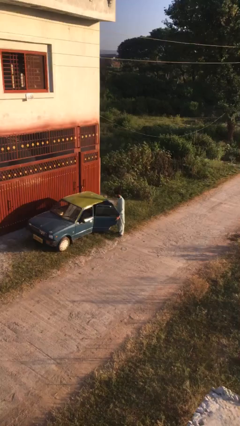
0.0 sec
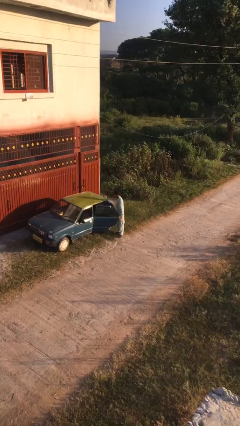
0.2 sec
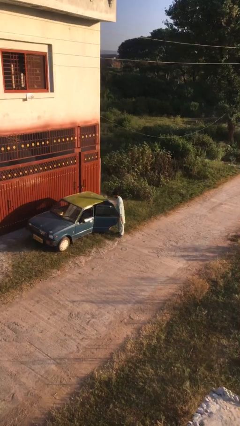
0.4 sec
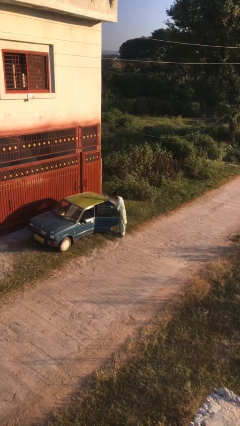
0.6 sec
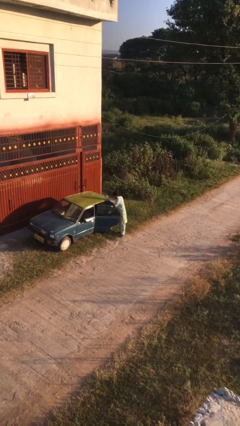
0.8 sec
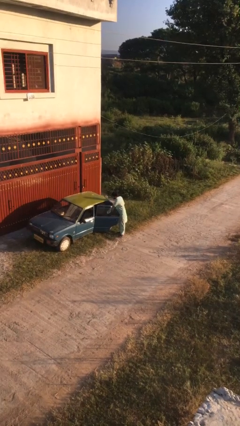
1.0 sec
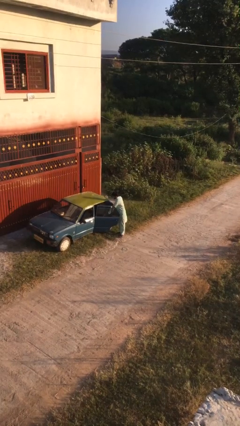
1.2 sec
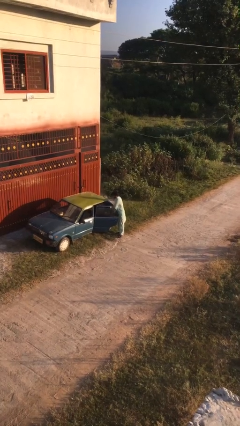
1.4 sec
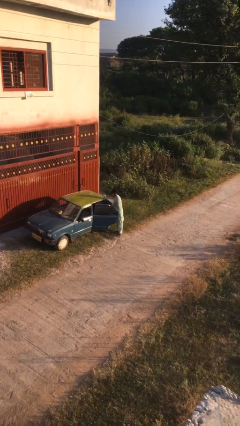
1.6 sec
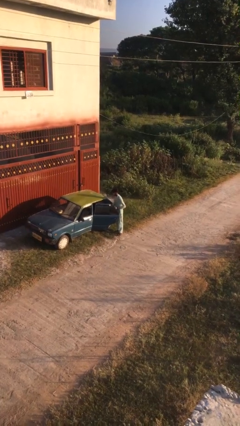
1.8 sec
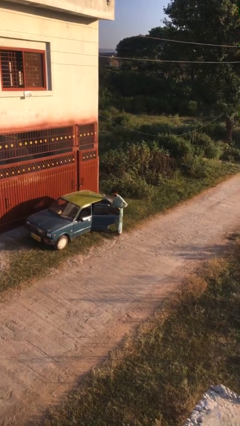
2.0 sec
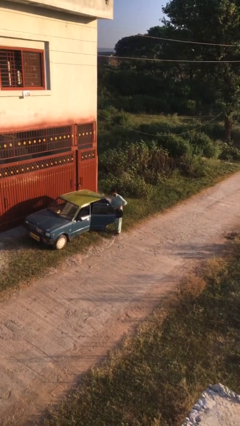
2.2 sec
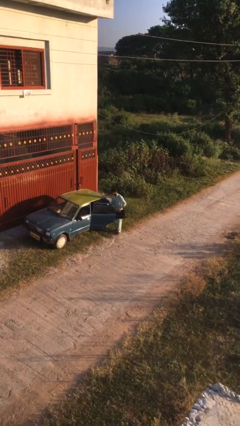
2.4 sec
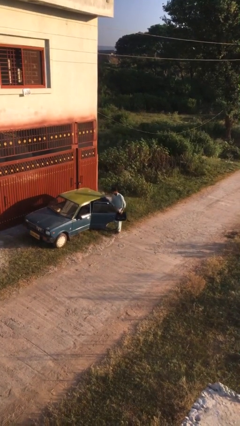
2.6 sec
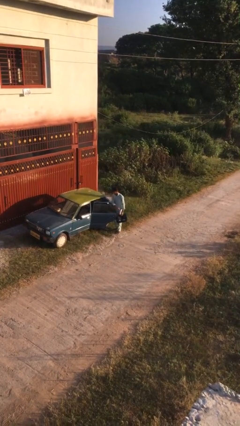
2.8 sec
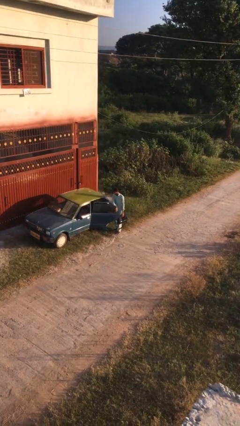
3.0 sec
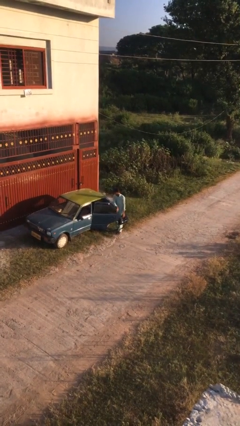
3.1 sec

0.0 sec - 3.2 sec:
person unloads car

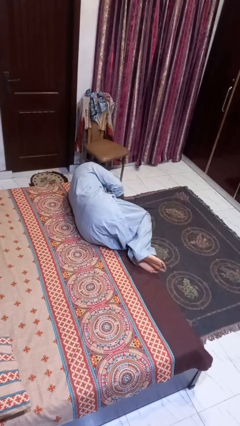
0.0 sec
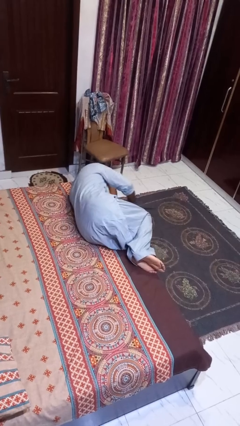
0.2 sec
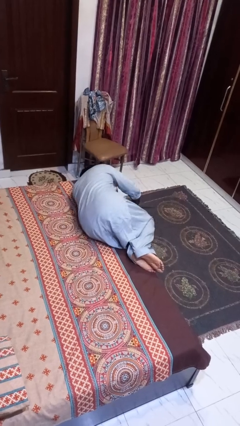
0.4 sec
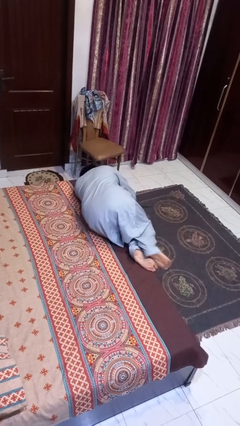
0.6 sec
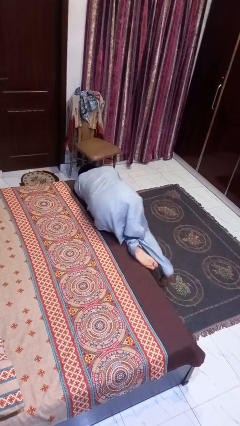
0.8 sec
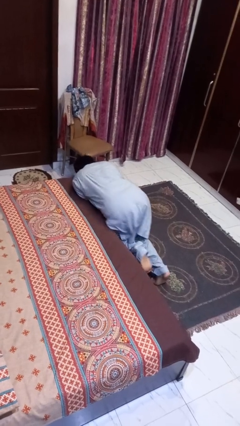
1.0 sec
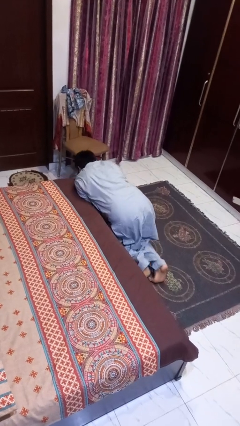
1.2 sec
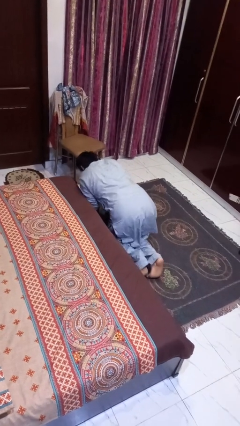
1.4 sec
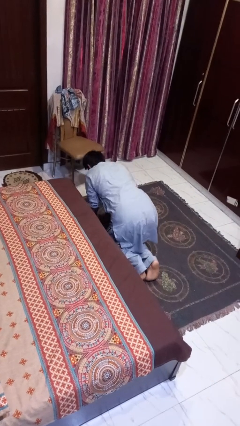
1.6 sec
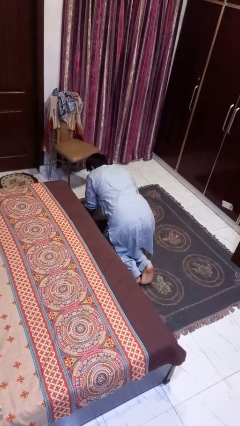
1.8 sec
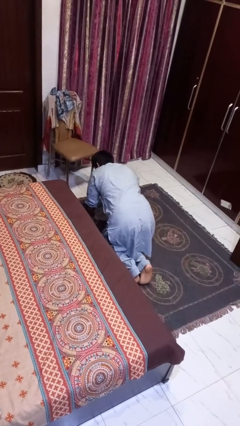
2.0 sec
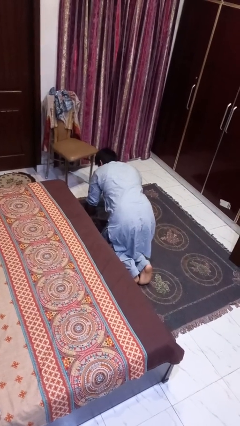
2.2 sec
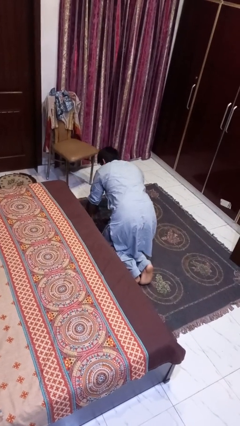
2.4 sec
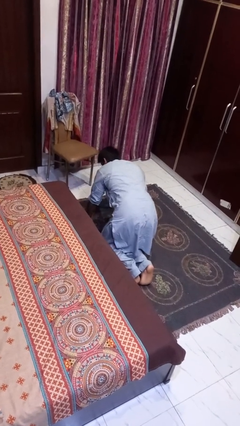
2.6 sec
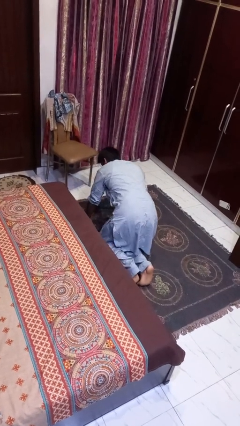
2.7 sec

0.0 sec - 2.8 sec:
person falls from bed

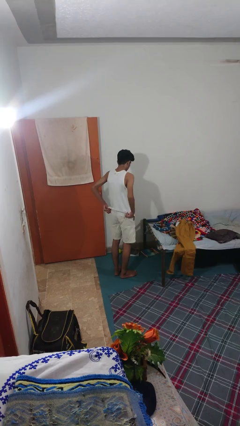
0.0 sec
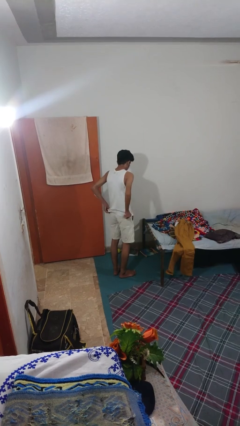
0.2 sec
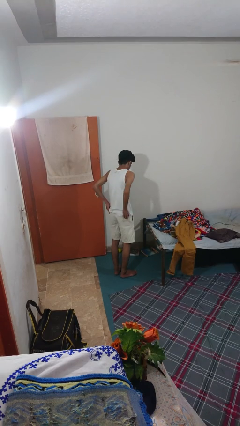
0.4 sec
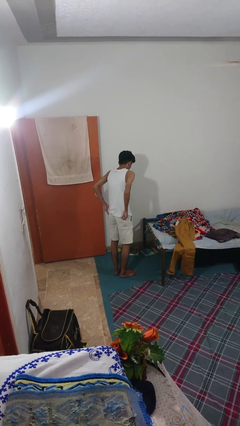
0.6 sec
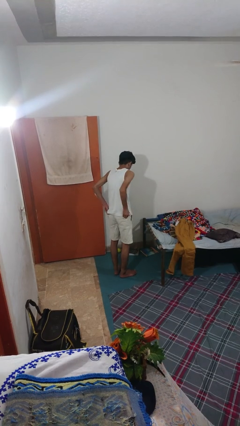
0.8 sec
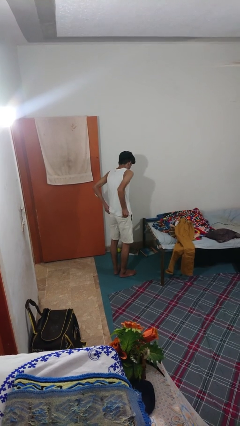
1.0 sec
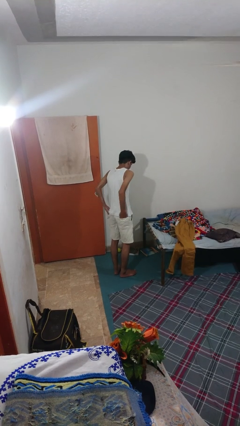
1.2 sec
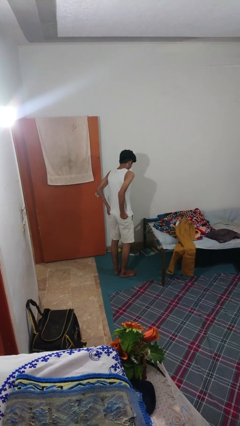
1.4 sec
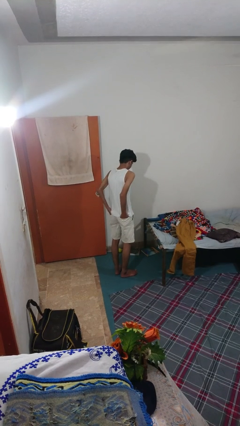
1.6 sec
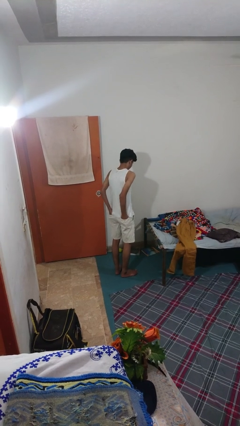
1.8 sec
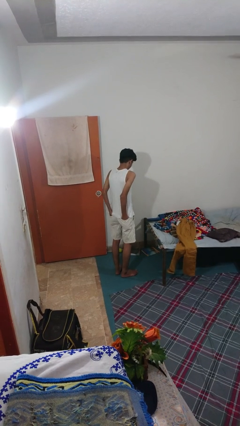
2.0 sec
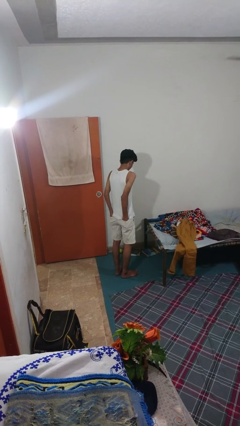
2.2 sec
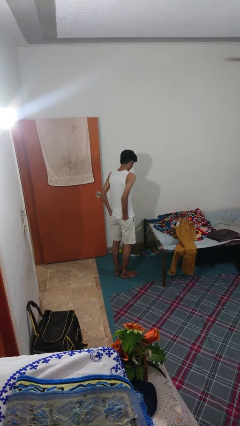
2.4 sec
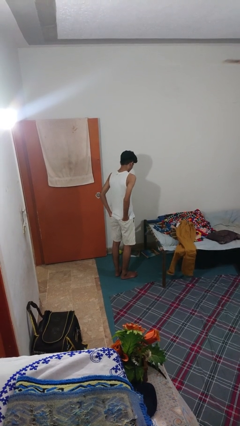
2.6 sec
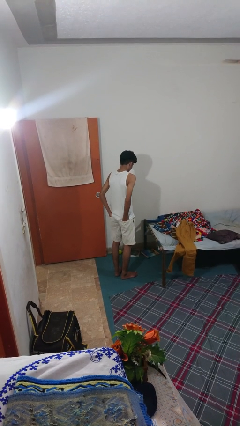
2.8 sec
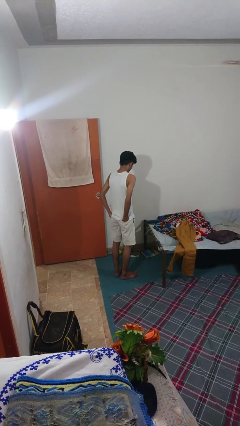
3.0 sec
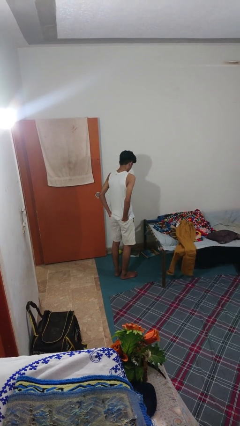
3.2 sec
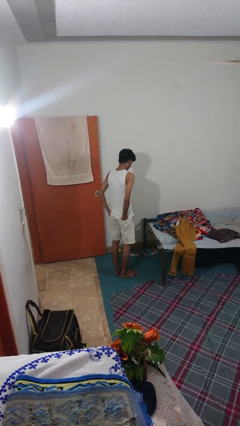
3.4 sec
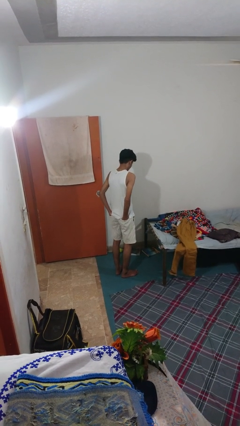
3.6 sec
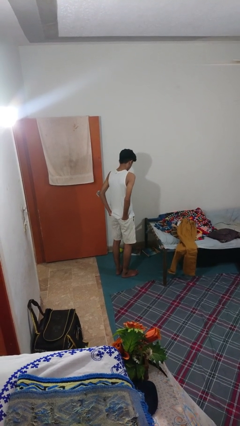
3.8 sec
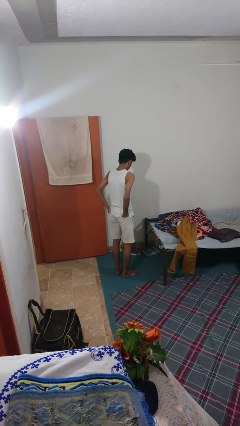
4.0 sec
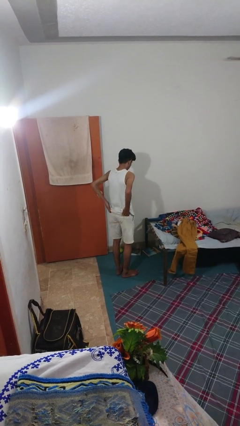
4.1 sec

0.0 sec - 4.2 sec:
person puts hands in back pockets

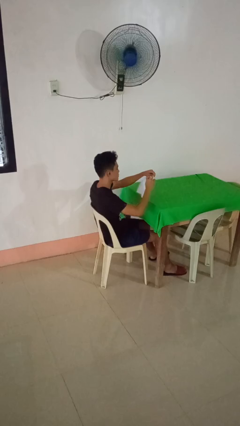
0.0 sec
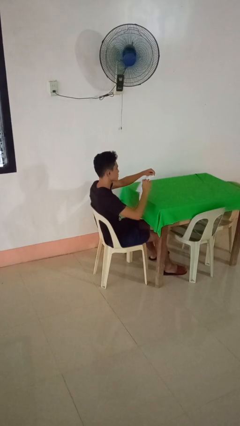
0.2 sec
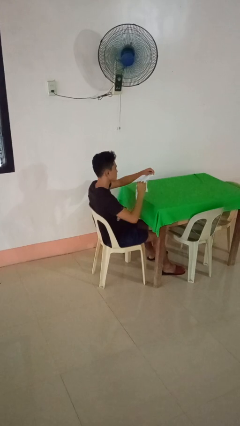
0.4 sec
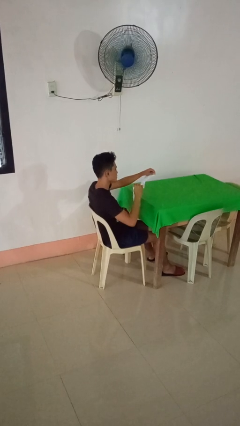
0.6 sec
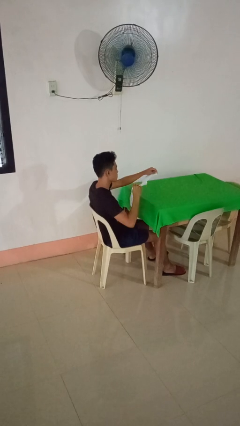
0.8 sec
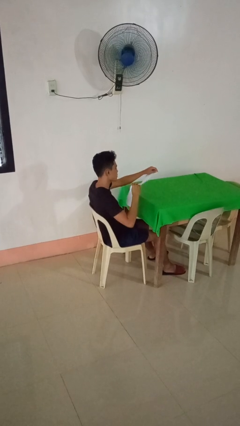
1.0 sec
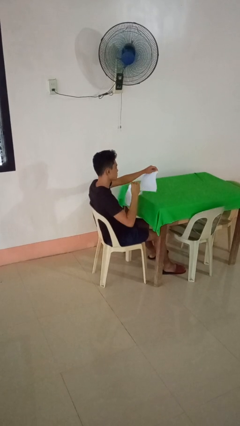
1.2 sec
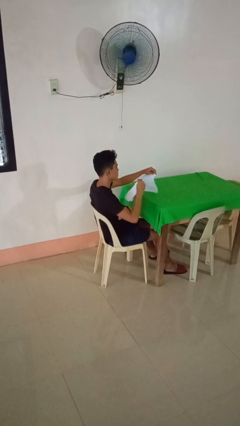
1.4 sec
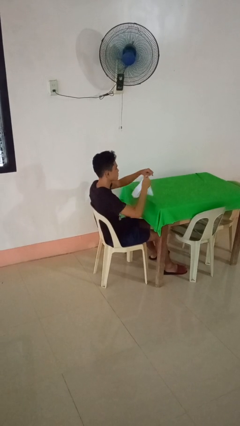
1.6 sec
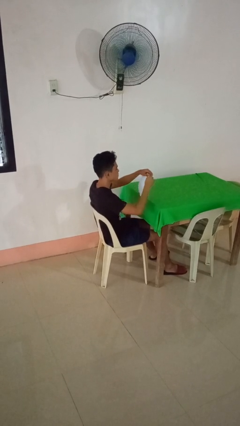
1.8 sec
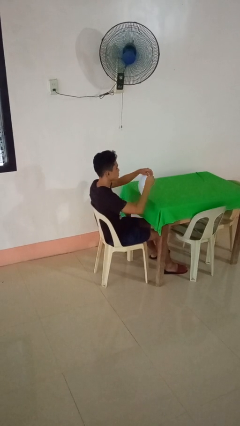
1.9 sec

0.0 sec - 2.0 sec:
person tears paper

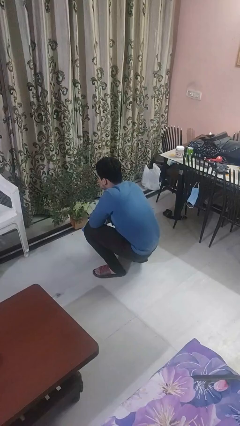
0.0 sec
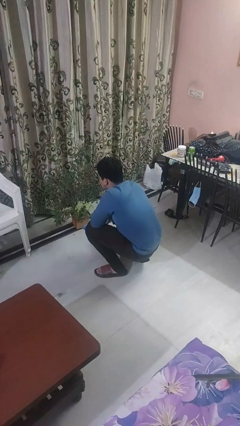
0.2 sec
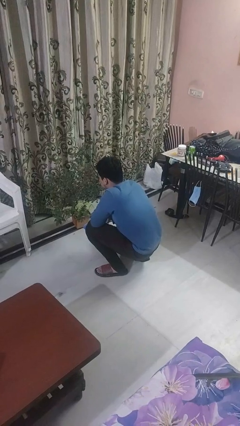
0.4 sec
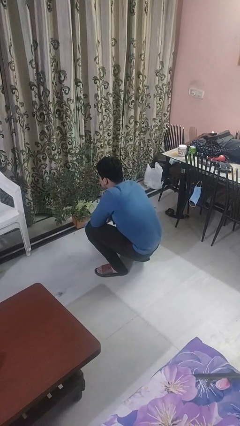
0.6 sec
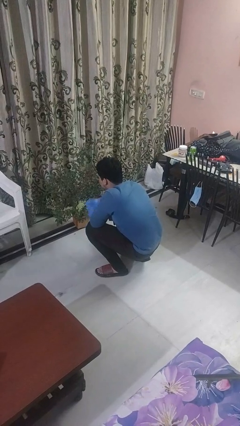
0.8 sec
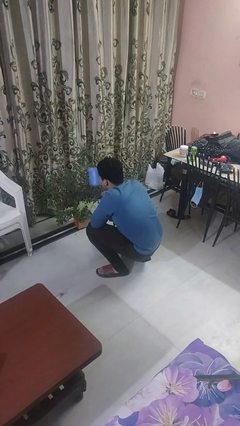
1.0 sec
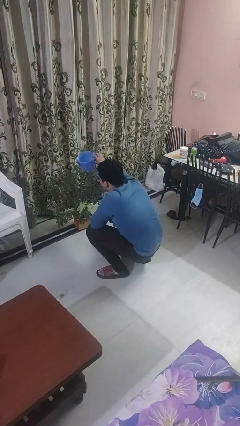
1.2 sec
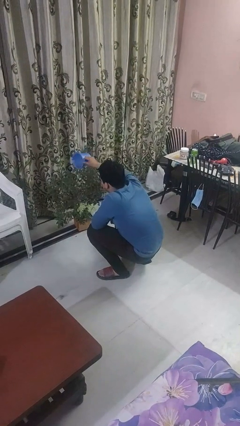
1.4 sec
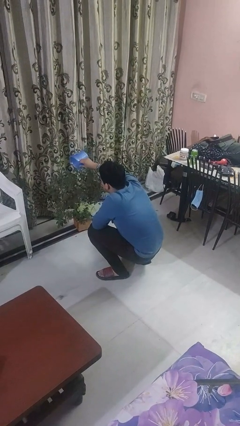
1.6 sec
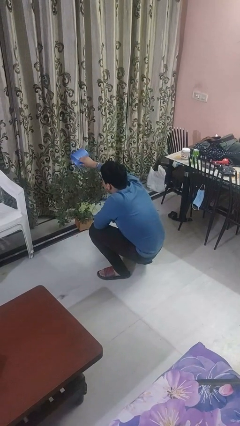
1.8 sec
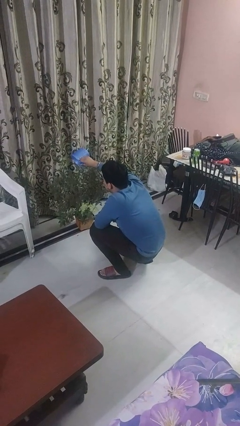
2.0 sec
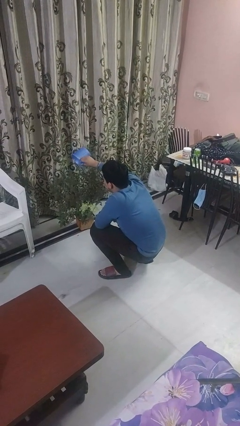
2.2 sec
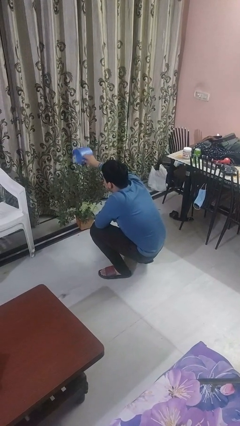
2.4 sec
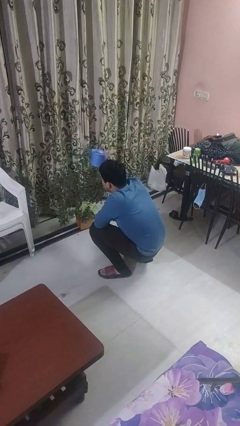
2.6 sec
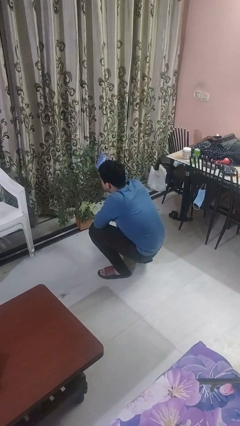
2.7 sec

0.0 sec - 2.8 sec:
person waters houseplant

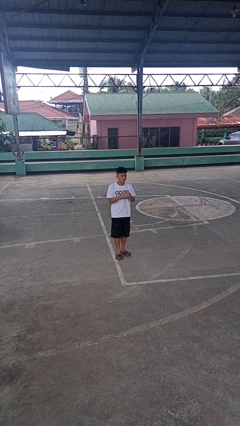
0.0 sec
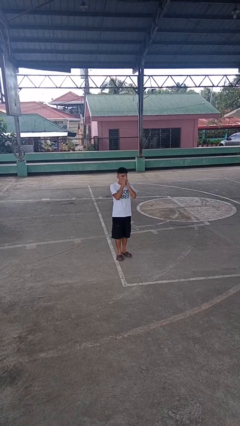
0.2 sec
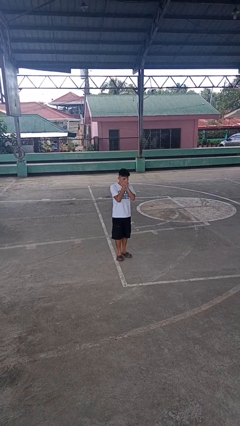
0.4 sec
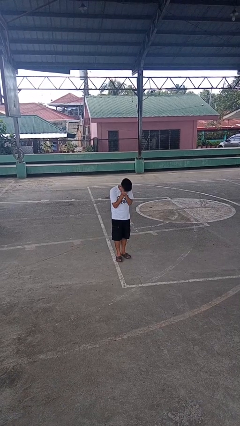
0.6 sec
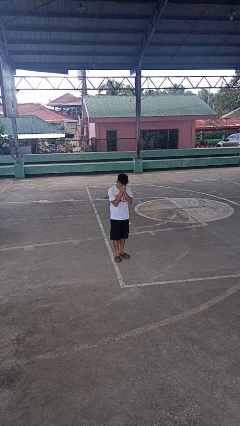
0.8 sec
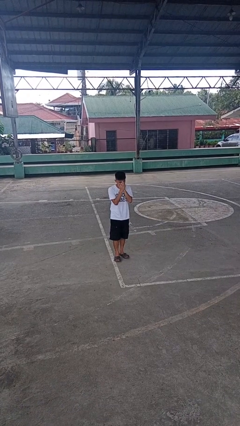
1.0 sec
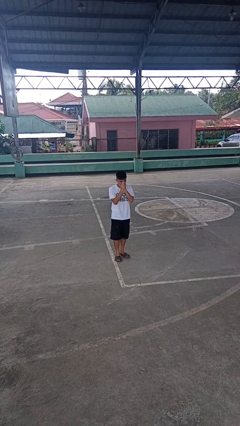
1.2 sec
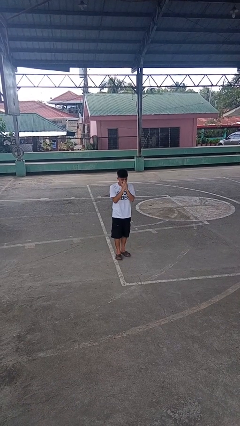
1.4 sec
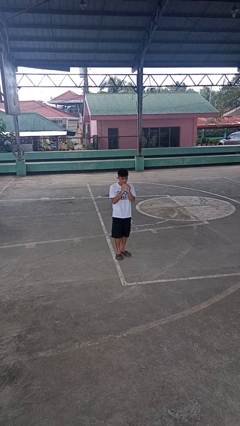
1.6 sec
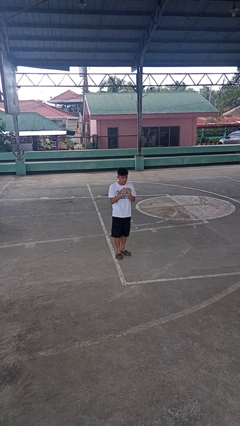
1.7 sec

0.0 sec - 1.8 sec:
person sneezes into hand

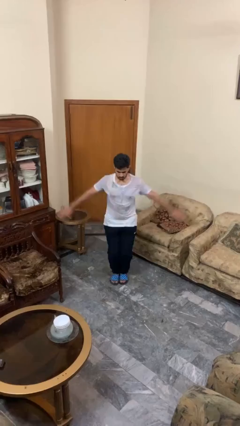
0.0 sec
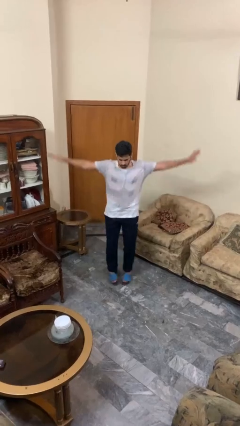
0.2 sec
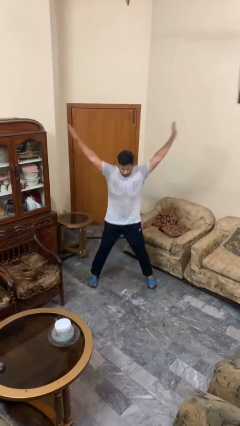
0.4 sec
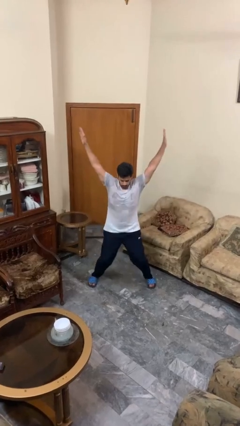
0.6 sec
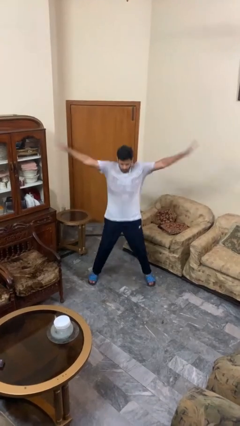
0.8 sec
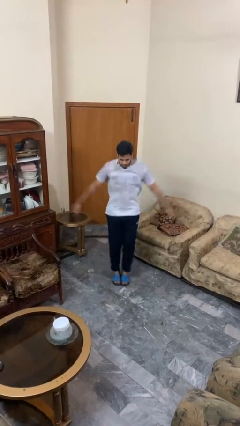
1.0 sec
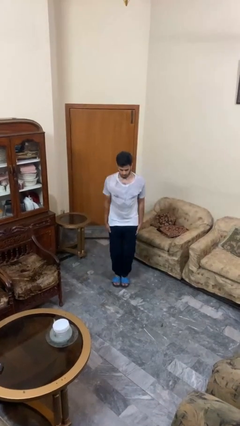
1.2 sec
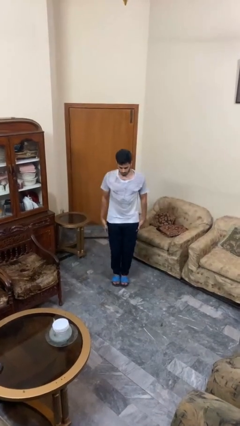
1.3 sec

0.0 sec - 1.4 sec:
person exercises with jumping jacks
